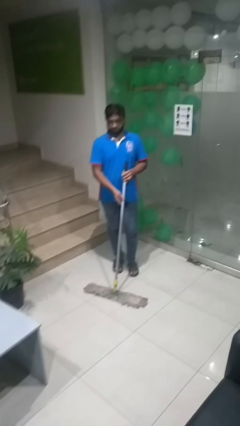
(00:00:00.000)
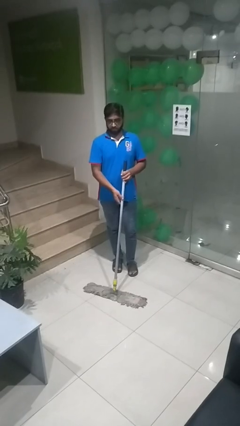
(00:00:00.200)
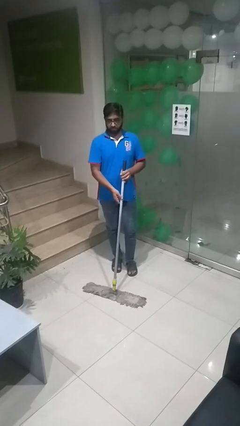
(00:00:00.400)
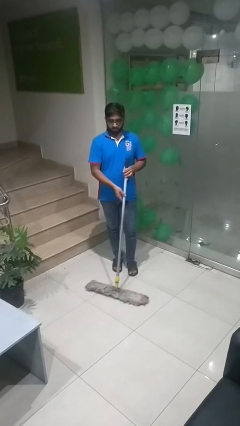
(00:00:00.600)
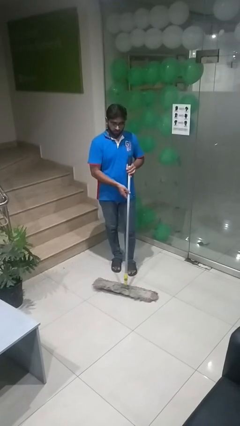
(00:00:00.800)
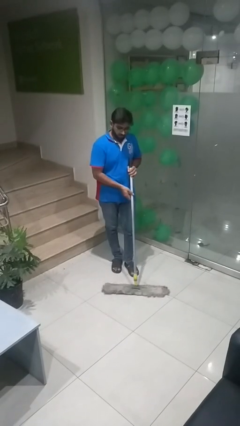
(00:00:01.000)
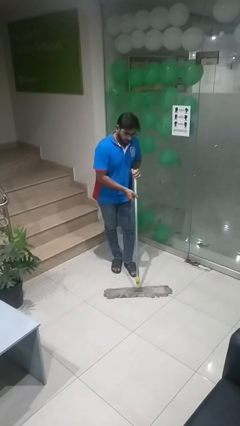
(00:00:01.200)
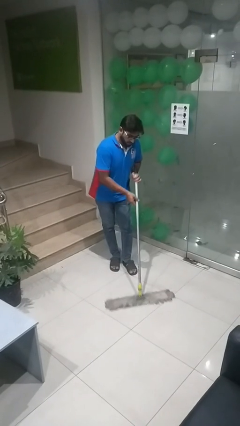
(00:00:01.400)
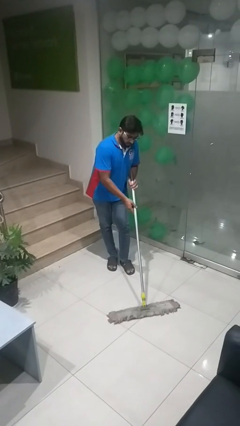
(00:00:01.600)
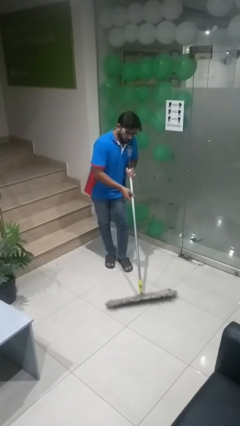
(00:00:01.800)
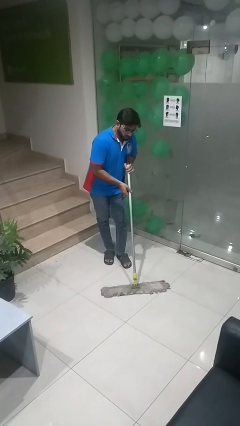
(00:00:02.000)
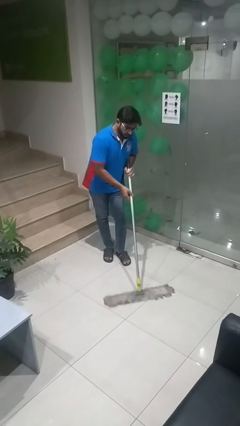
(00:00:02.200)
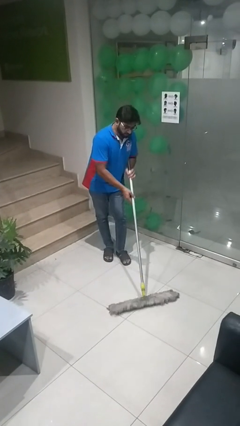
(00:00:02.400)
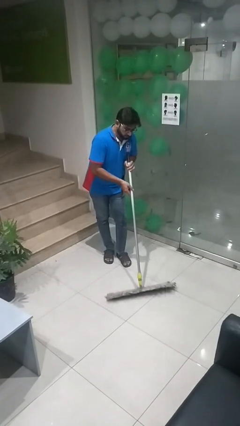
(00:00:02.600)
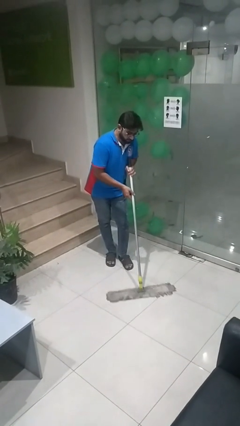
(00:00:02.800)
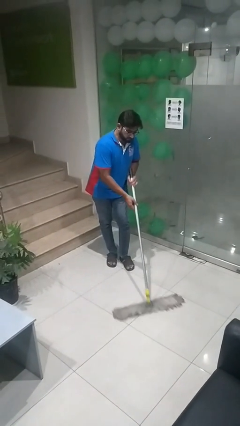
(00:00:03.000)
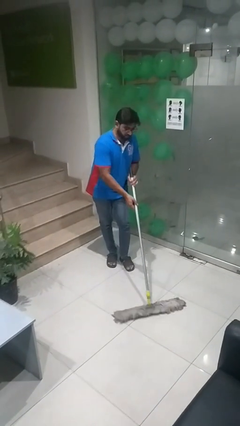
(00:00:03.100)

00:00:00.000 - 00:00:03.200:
person mops

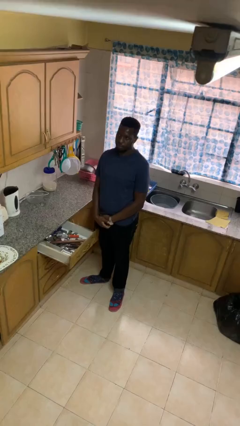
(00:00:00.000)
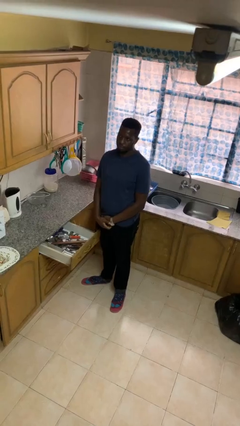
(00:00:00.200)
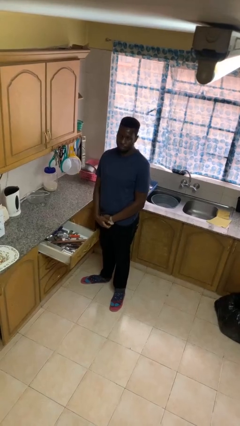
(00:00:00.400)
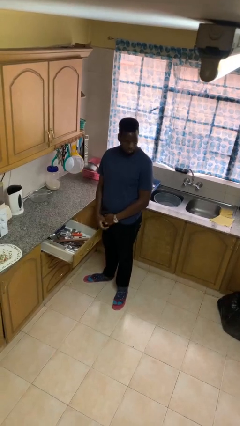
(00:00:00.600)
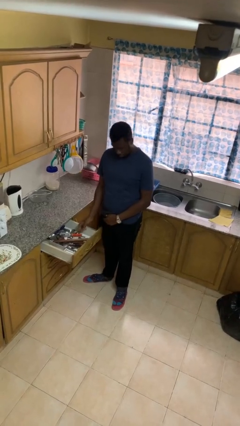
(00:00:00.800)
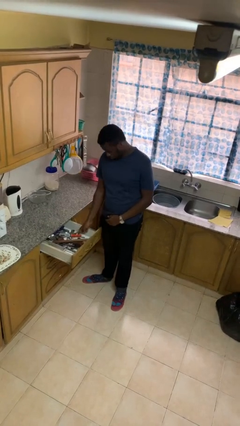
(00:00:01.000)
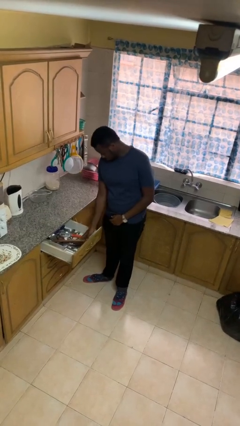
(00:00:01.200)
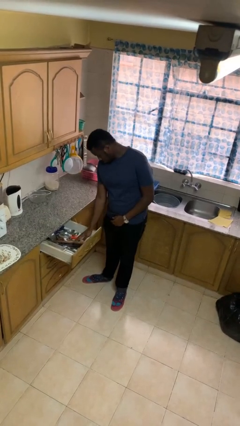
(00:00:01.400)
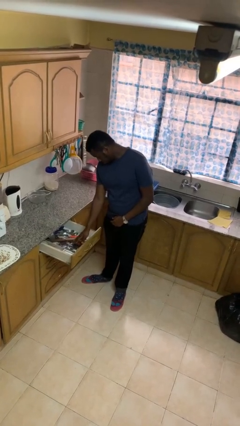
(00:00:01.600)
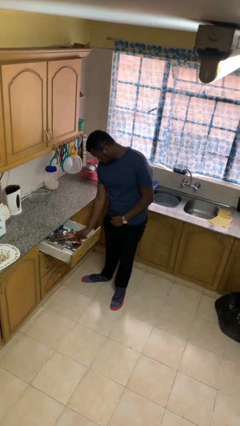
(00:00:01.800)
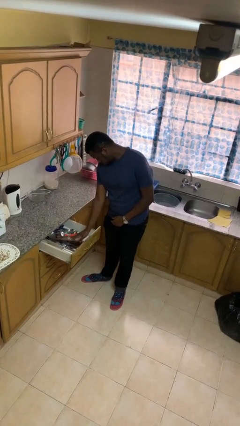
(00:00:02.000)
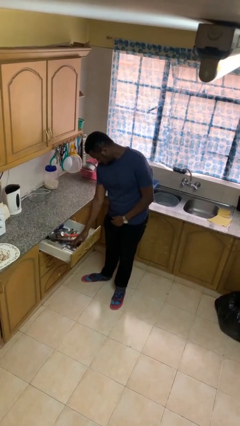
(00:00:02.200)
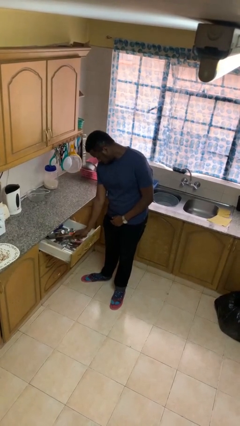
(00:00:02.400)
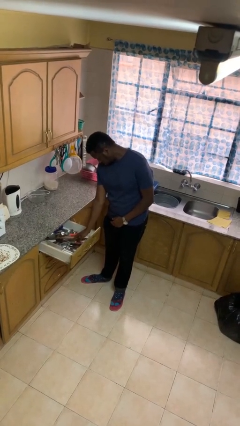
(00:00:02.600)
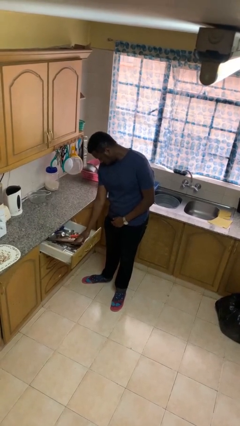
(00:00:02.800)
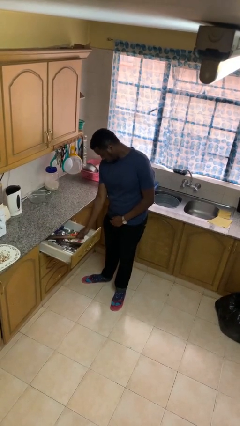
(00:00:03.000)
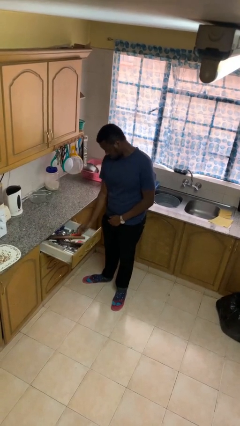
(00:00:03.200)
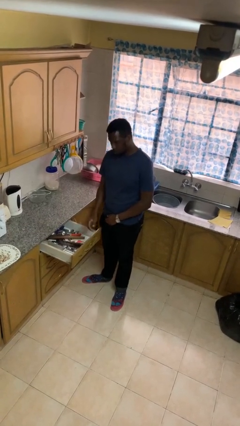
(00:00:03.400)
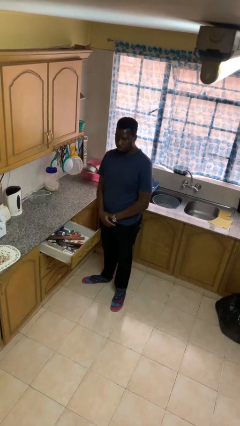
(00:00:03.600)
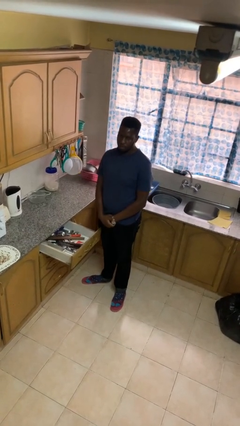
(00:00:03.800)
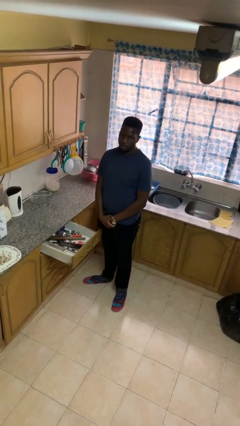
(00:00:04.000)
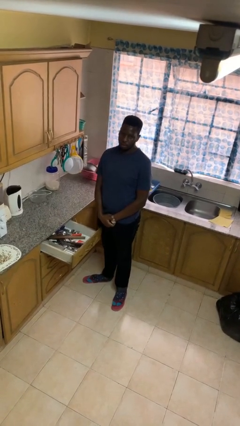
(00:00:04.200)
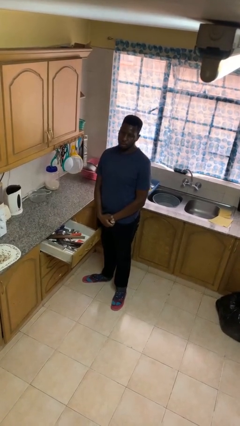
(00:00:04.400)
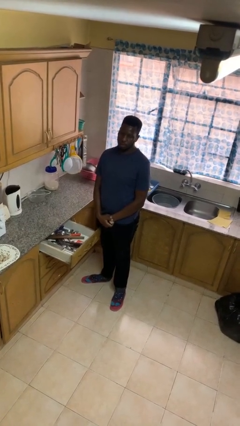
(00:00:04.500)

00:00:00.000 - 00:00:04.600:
person searches in kitchen drawer

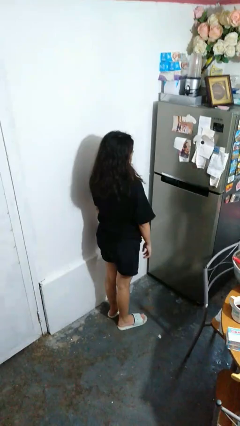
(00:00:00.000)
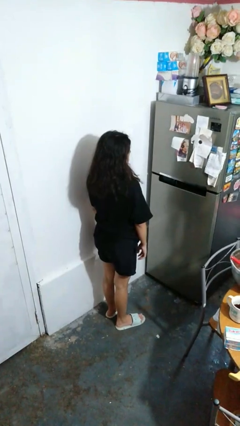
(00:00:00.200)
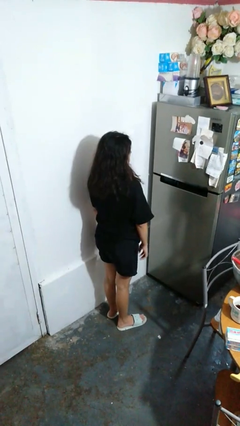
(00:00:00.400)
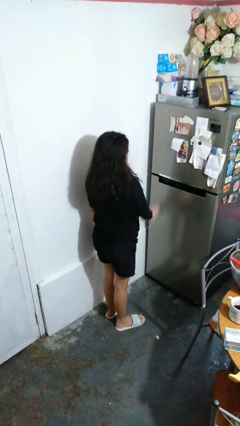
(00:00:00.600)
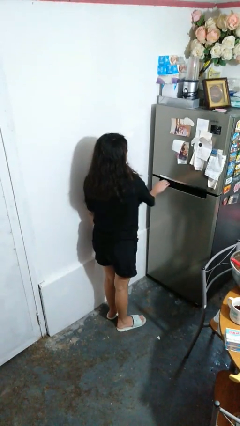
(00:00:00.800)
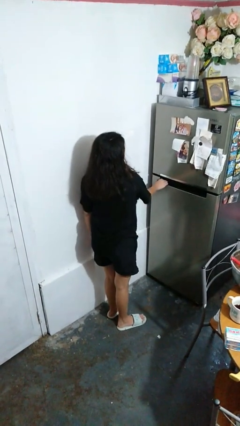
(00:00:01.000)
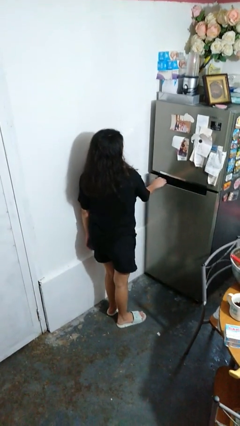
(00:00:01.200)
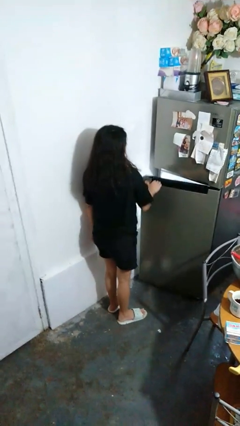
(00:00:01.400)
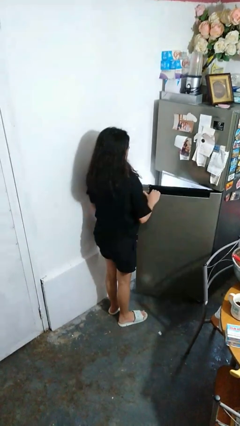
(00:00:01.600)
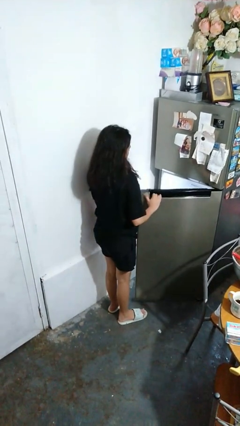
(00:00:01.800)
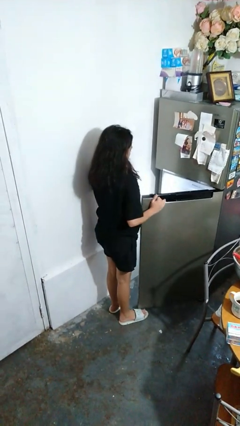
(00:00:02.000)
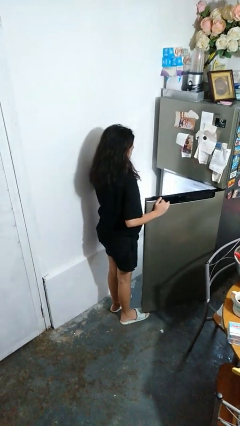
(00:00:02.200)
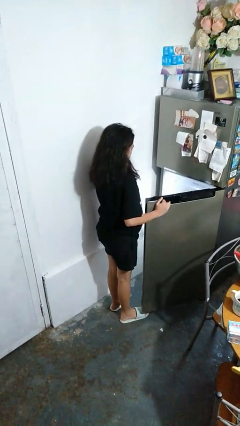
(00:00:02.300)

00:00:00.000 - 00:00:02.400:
person opens refrigerator

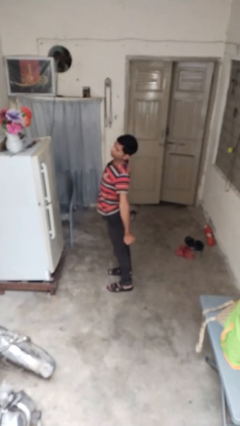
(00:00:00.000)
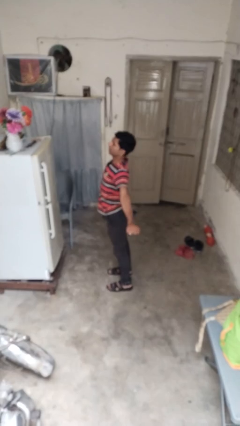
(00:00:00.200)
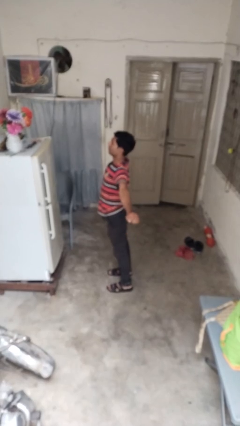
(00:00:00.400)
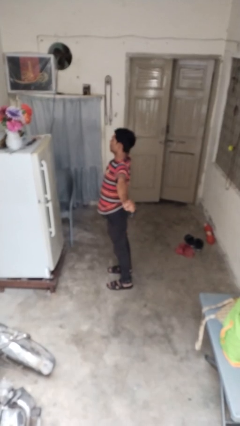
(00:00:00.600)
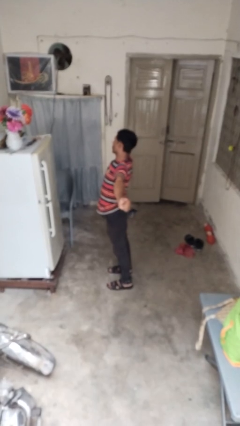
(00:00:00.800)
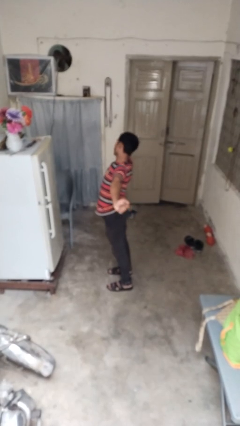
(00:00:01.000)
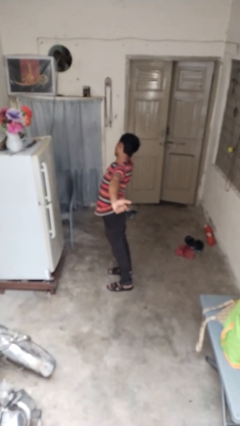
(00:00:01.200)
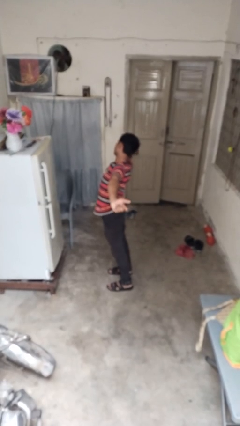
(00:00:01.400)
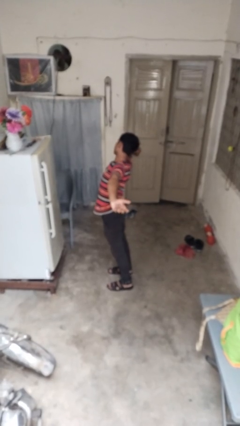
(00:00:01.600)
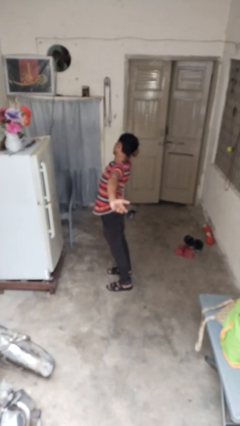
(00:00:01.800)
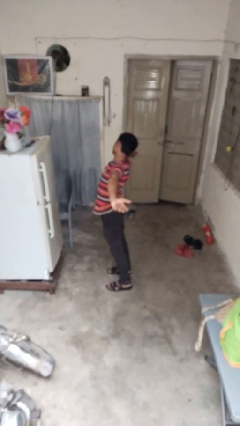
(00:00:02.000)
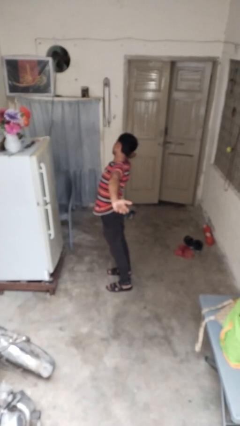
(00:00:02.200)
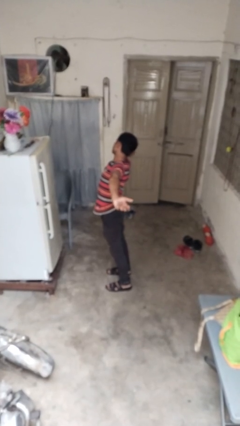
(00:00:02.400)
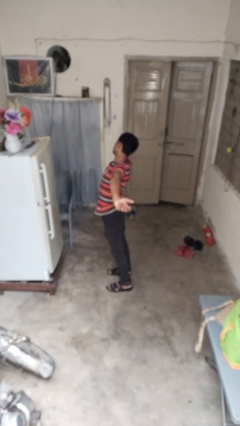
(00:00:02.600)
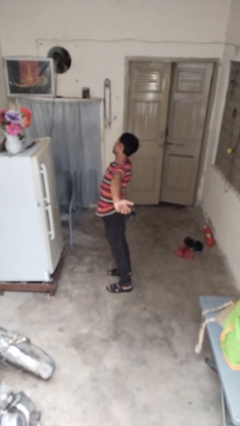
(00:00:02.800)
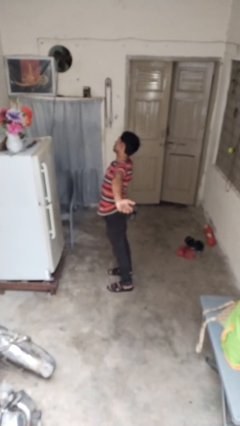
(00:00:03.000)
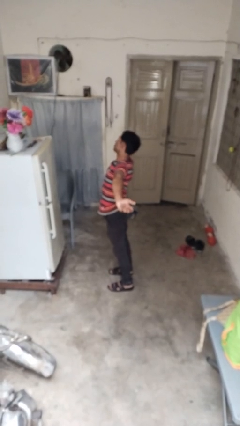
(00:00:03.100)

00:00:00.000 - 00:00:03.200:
person stretches arms to side

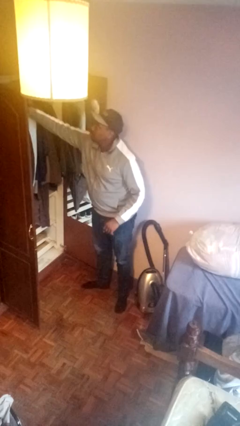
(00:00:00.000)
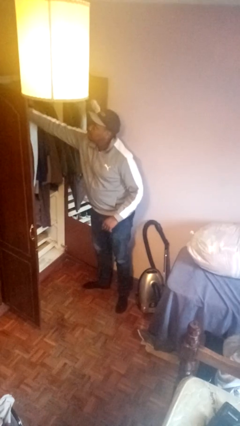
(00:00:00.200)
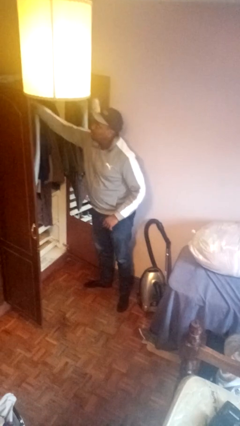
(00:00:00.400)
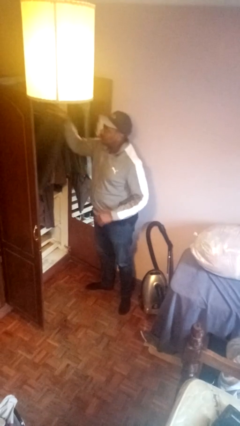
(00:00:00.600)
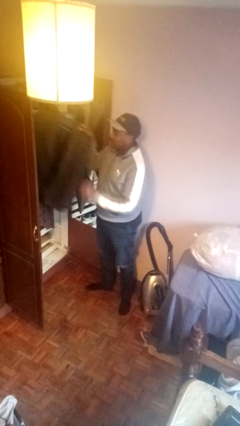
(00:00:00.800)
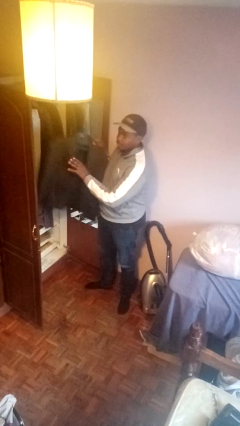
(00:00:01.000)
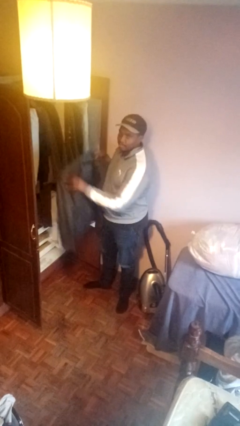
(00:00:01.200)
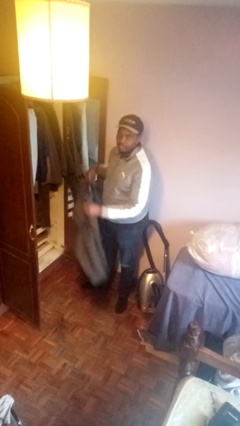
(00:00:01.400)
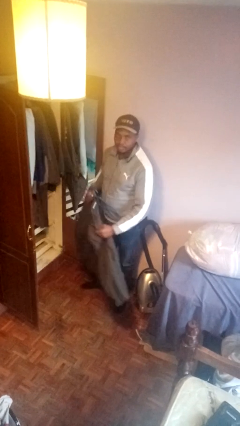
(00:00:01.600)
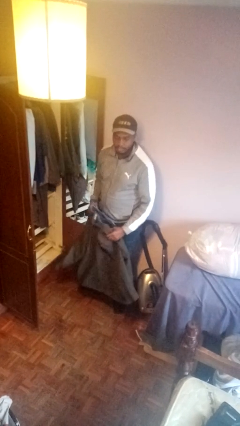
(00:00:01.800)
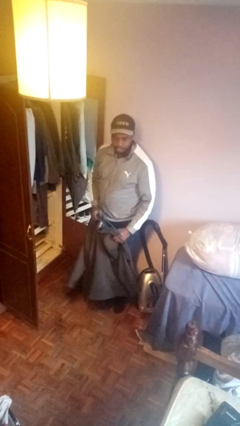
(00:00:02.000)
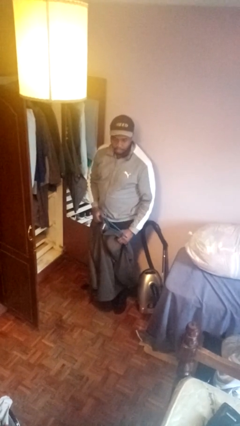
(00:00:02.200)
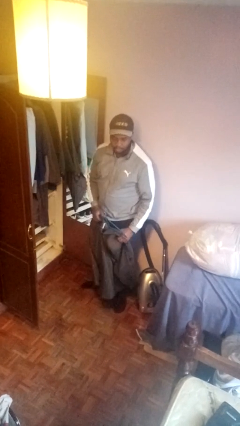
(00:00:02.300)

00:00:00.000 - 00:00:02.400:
person takes clothes from closet
